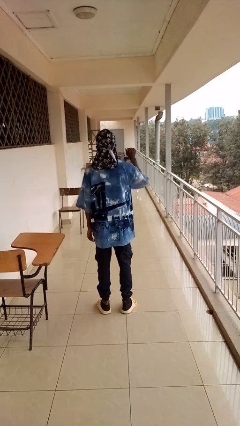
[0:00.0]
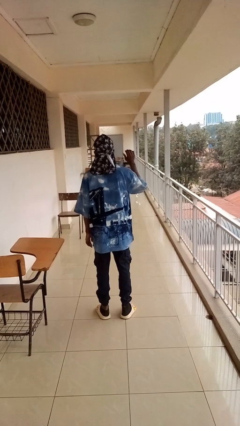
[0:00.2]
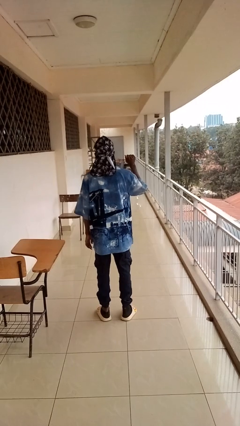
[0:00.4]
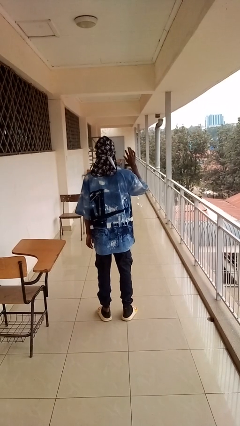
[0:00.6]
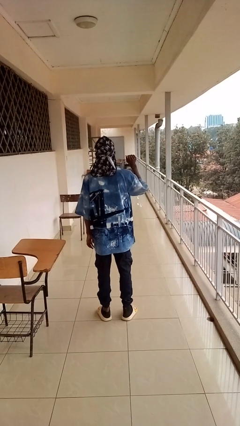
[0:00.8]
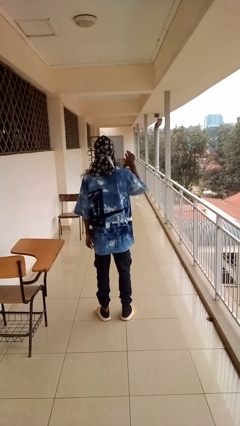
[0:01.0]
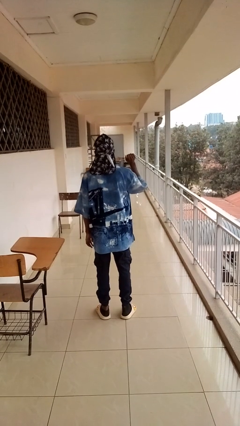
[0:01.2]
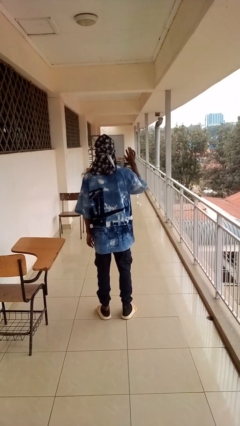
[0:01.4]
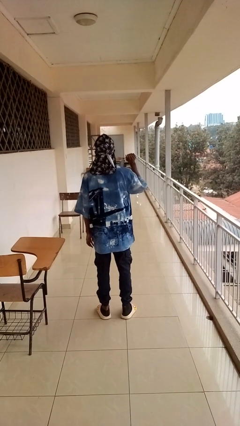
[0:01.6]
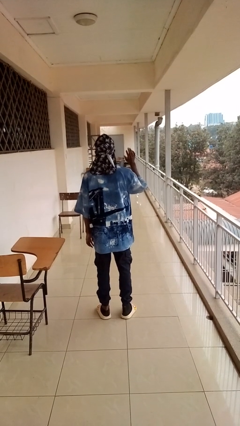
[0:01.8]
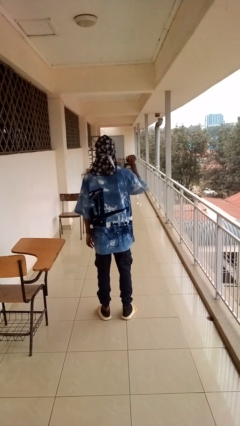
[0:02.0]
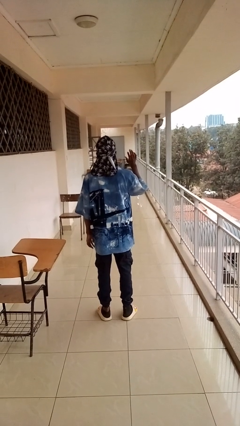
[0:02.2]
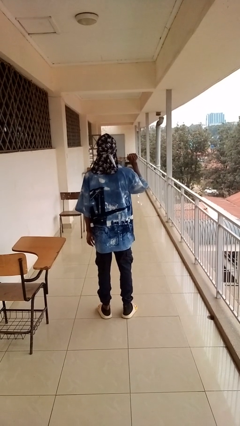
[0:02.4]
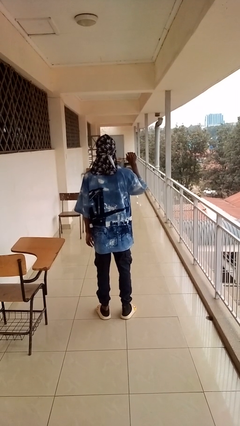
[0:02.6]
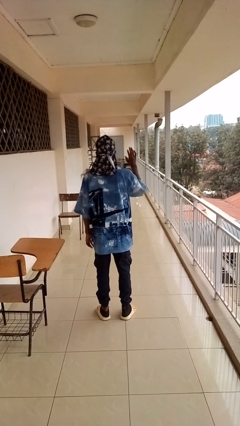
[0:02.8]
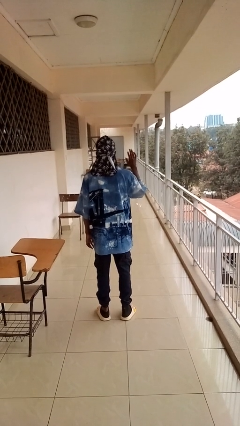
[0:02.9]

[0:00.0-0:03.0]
person gestures come here

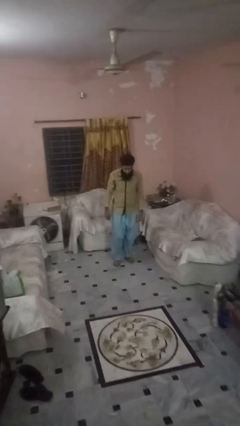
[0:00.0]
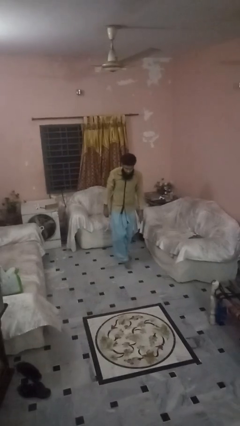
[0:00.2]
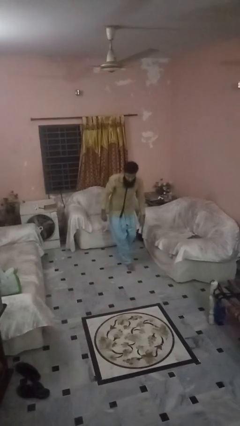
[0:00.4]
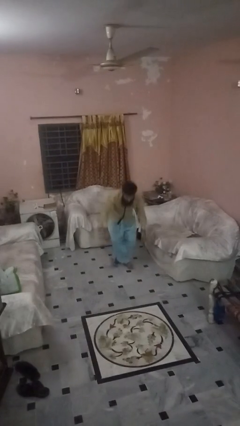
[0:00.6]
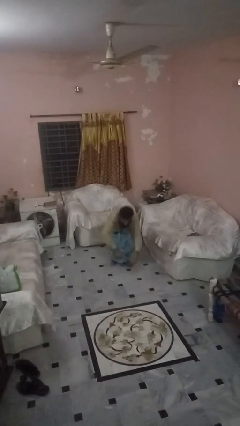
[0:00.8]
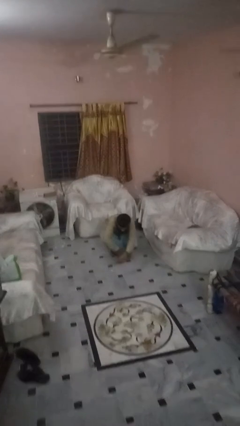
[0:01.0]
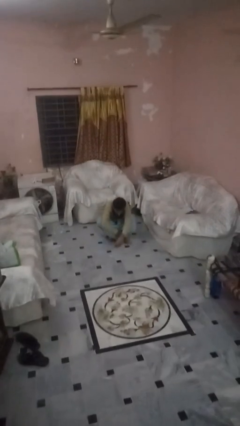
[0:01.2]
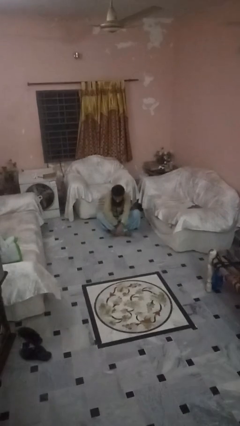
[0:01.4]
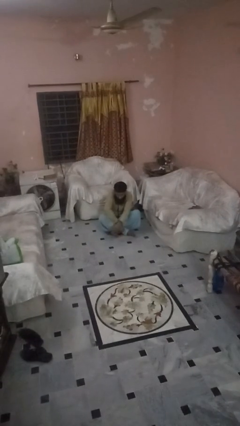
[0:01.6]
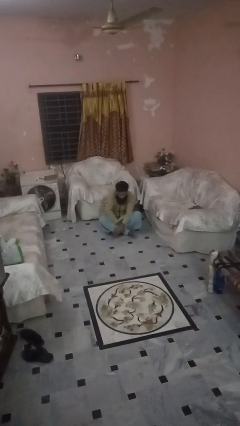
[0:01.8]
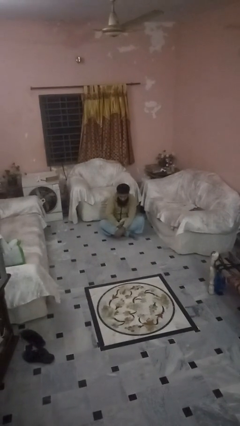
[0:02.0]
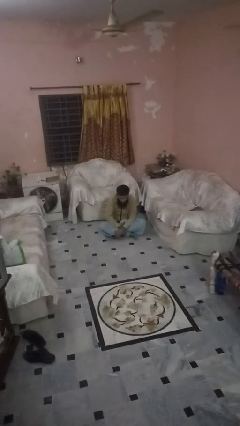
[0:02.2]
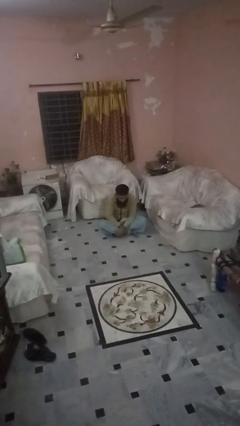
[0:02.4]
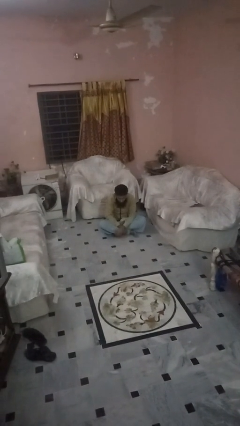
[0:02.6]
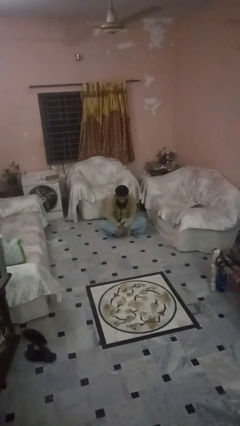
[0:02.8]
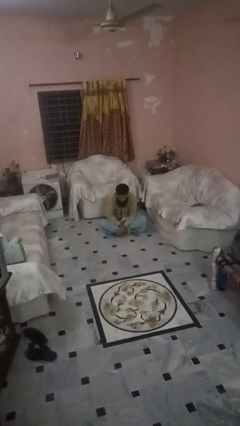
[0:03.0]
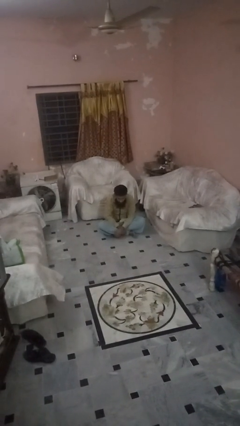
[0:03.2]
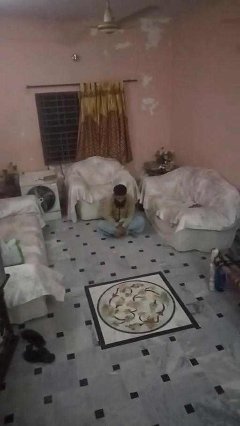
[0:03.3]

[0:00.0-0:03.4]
person sits crisscross

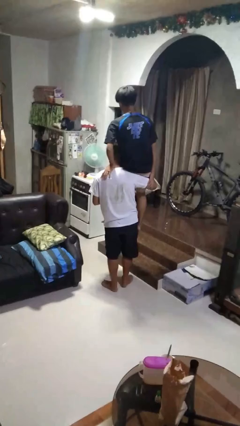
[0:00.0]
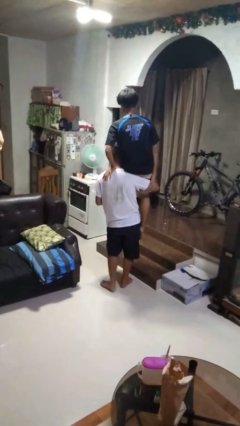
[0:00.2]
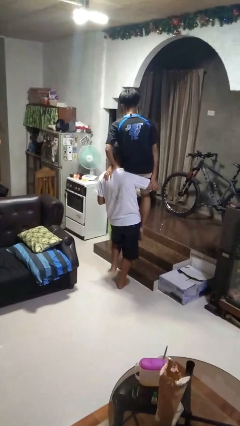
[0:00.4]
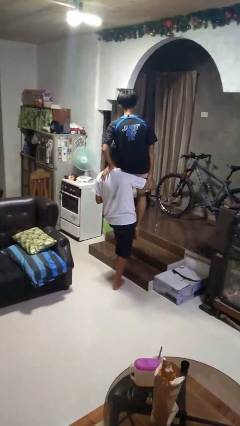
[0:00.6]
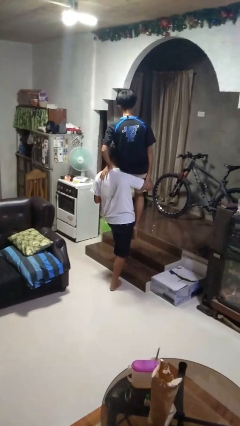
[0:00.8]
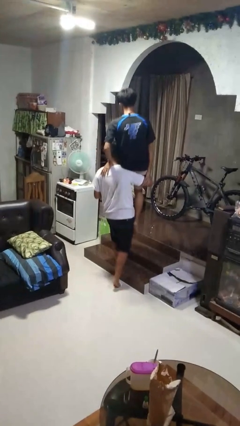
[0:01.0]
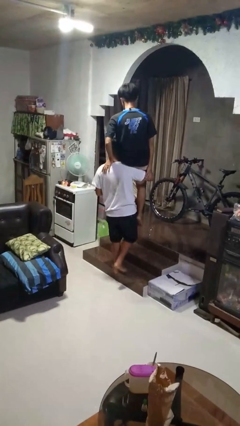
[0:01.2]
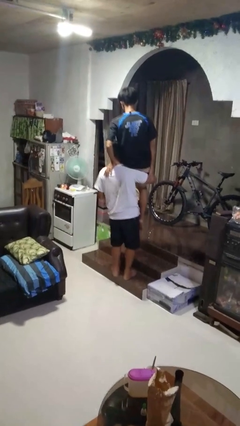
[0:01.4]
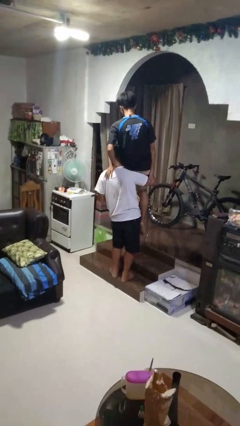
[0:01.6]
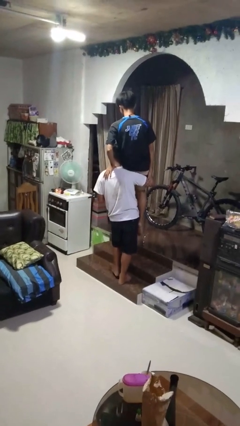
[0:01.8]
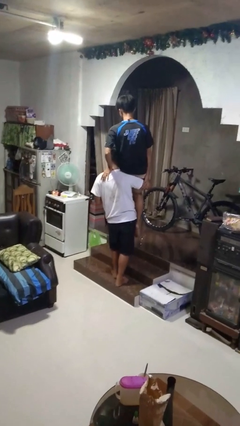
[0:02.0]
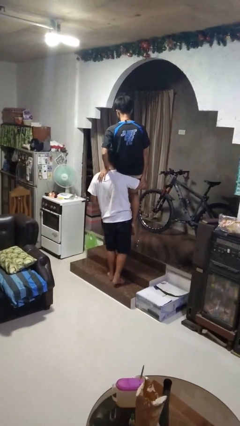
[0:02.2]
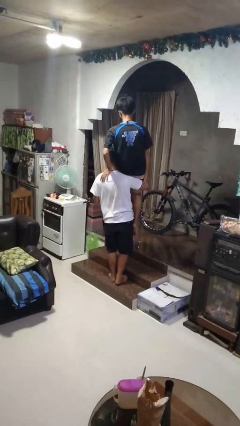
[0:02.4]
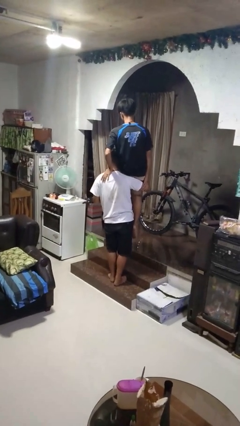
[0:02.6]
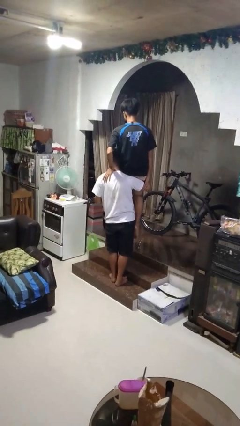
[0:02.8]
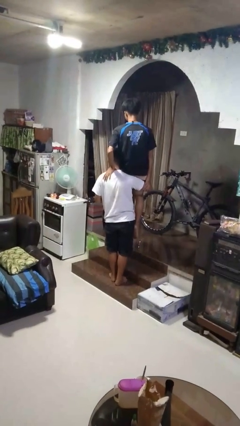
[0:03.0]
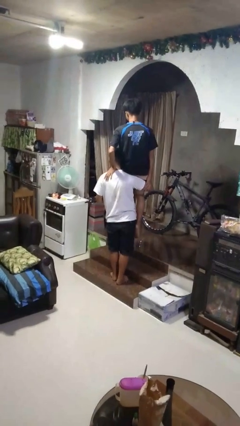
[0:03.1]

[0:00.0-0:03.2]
person carries person on back

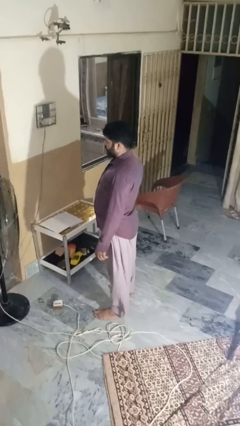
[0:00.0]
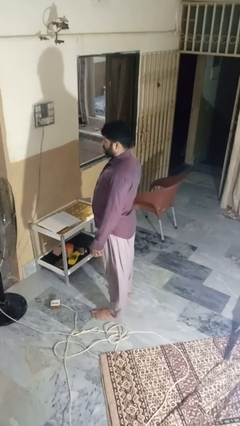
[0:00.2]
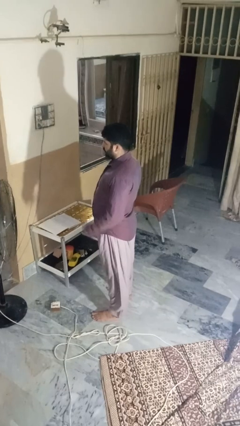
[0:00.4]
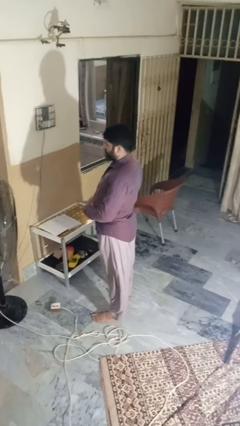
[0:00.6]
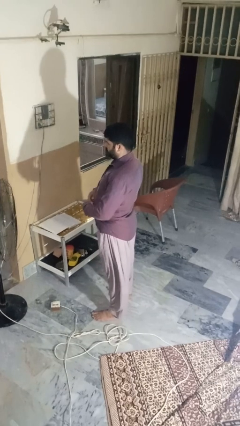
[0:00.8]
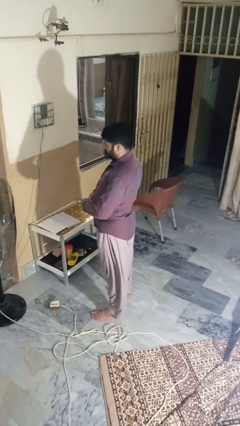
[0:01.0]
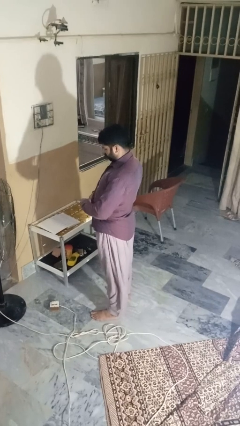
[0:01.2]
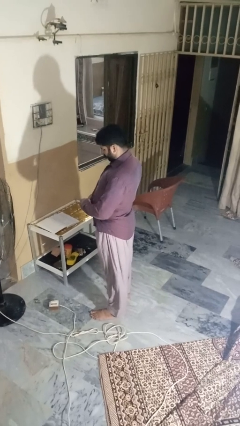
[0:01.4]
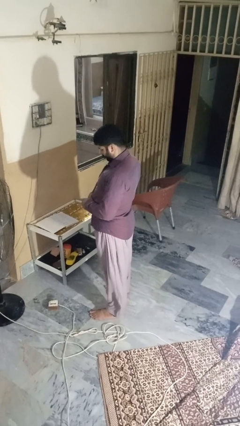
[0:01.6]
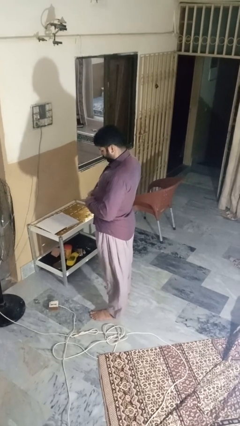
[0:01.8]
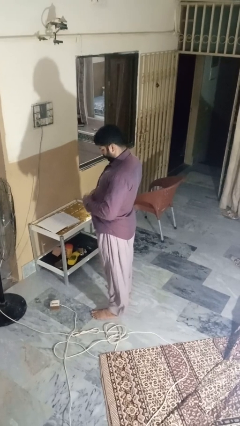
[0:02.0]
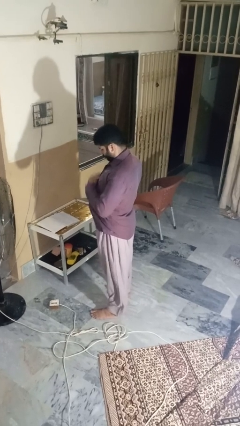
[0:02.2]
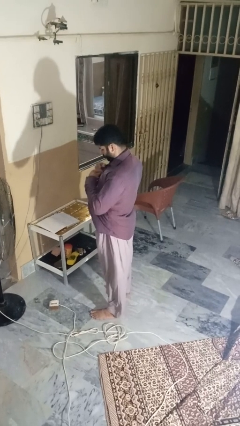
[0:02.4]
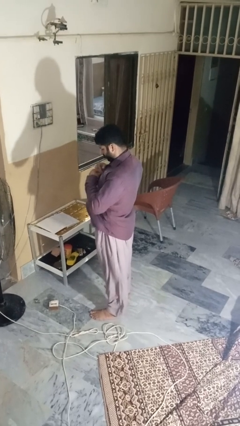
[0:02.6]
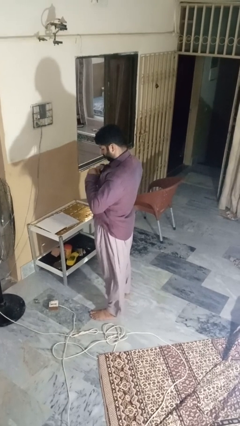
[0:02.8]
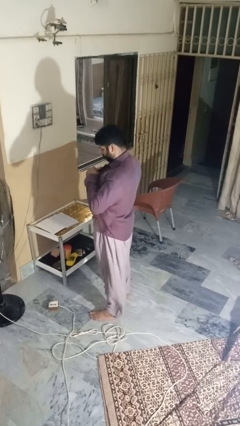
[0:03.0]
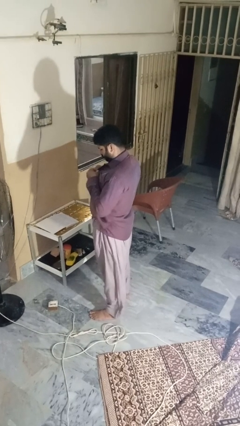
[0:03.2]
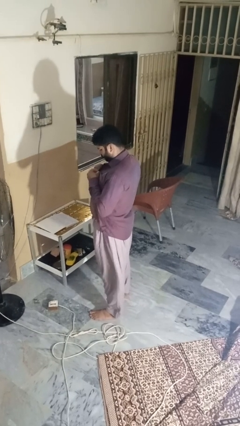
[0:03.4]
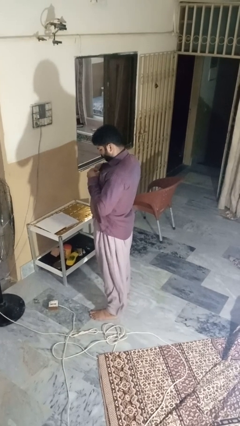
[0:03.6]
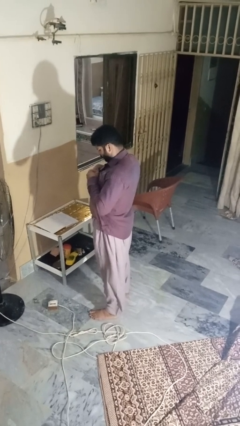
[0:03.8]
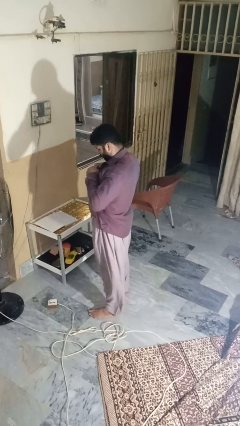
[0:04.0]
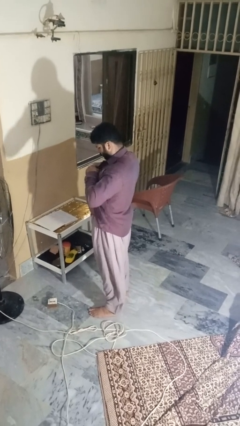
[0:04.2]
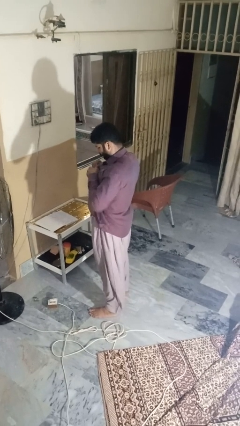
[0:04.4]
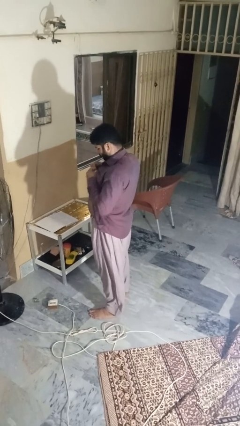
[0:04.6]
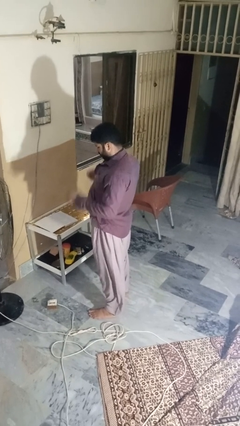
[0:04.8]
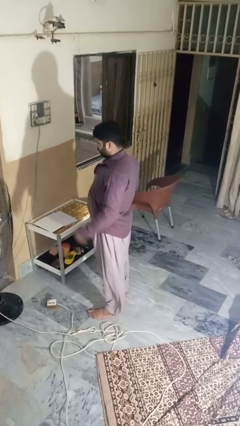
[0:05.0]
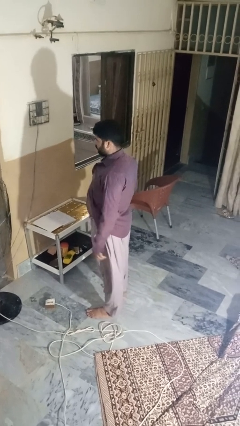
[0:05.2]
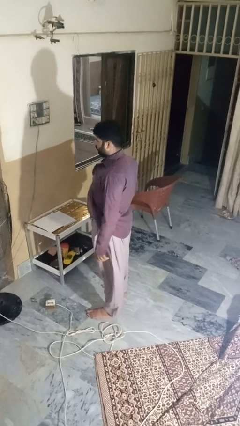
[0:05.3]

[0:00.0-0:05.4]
person unbuttons shirt

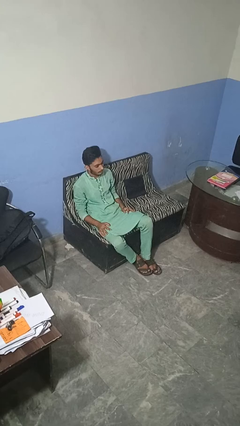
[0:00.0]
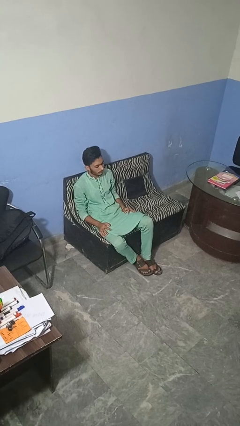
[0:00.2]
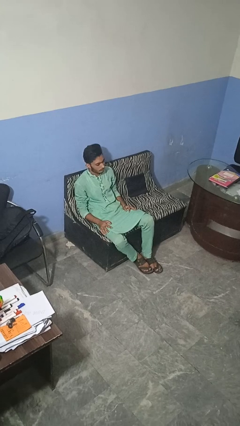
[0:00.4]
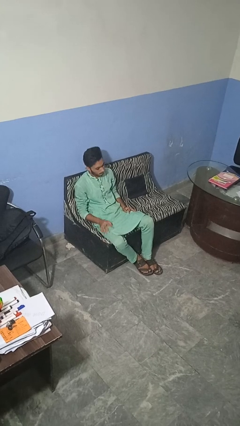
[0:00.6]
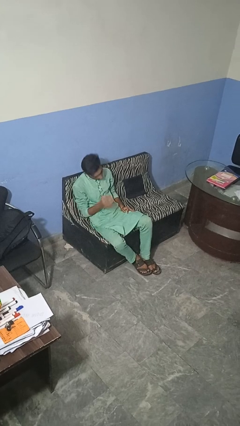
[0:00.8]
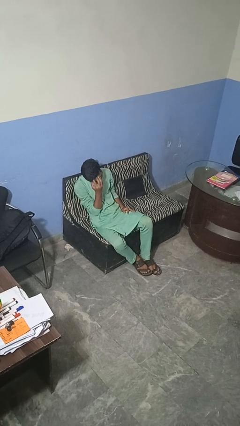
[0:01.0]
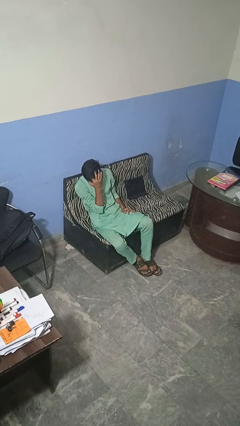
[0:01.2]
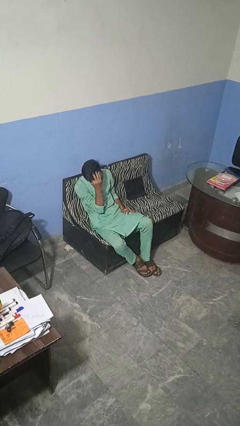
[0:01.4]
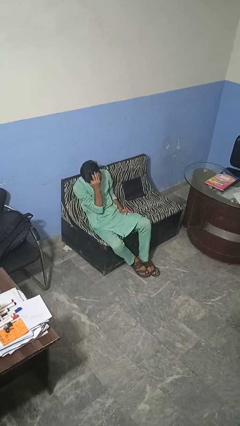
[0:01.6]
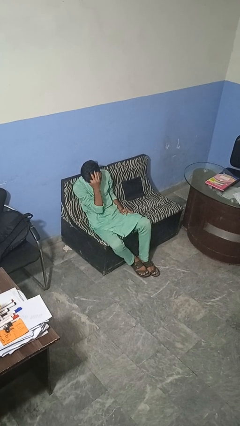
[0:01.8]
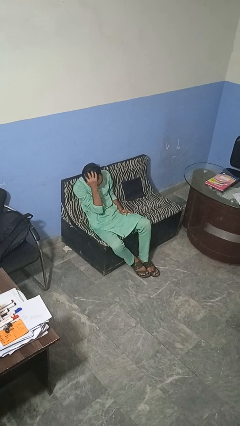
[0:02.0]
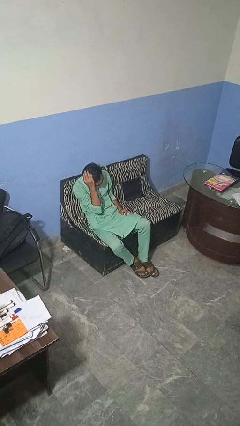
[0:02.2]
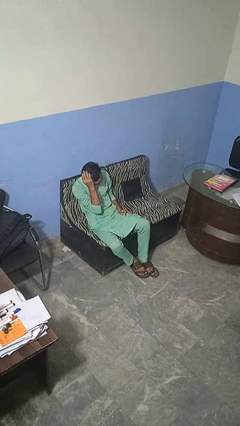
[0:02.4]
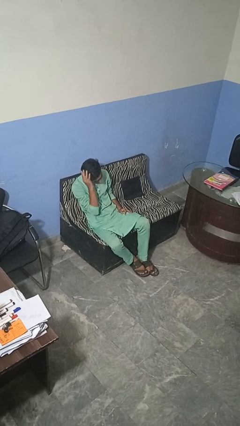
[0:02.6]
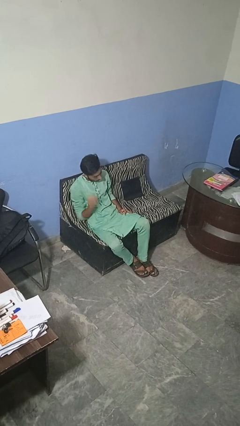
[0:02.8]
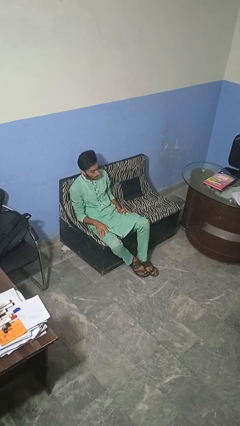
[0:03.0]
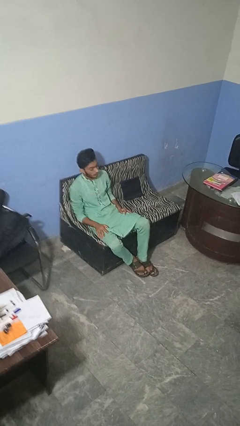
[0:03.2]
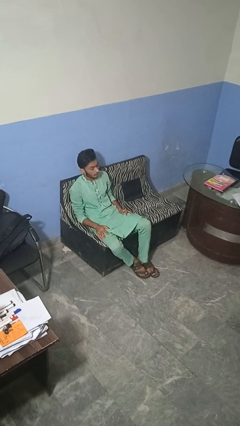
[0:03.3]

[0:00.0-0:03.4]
person strokes hair
